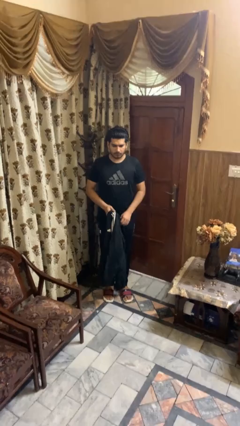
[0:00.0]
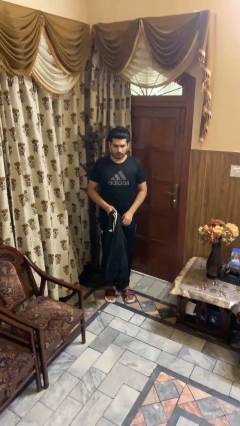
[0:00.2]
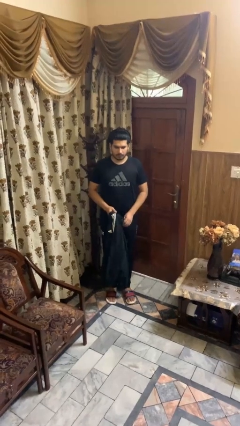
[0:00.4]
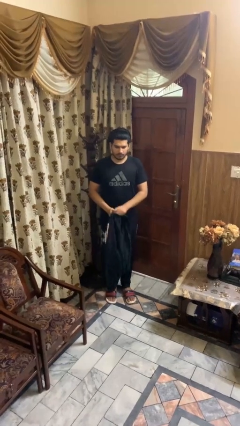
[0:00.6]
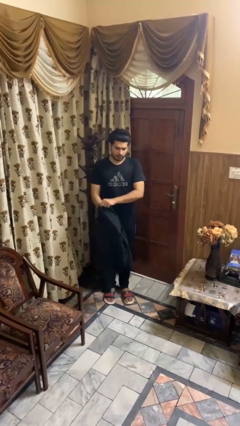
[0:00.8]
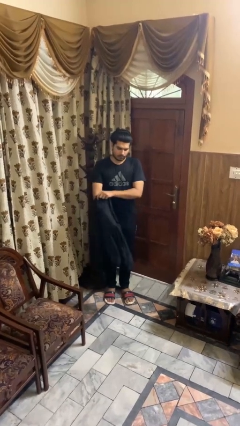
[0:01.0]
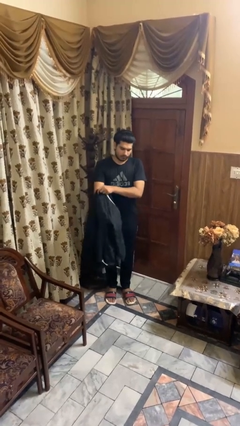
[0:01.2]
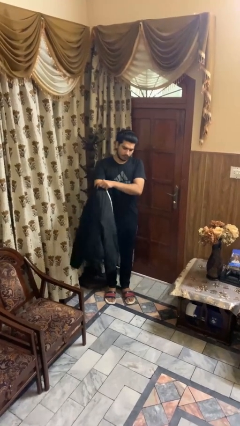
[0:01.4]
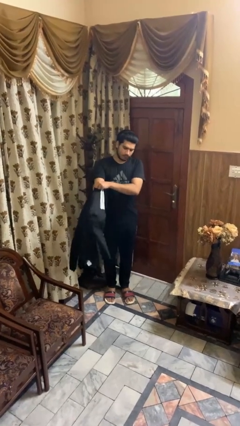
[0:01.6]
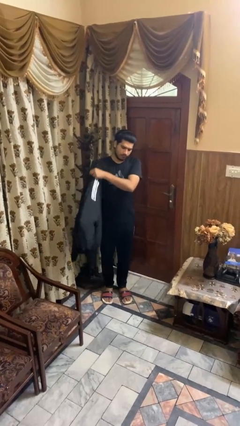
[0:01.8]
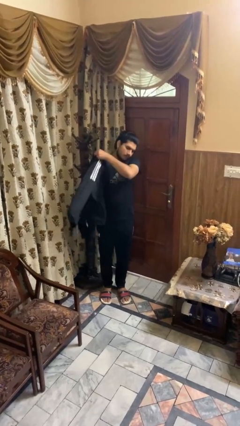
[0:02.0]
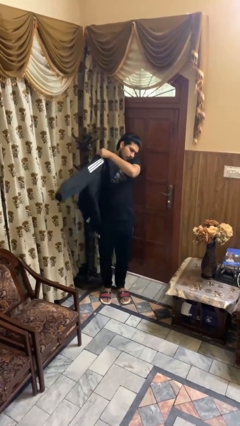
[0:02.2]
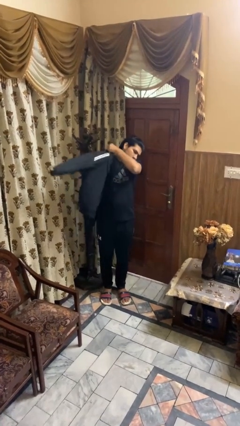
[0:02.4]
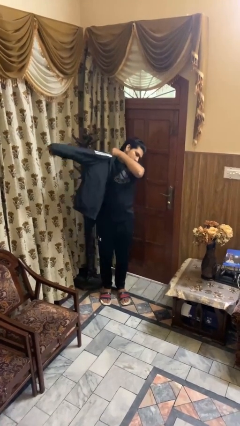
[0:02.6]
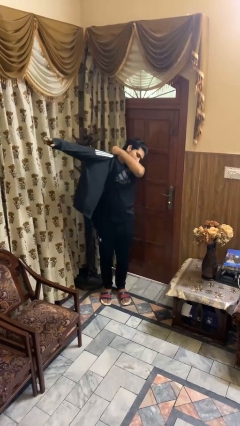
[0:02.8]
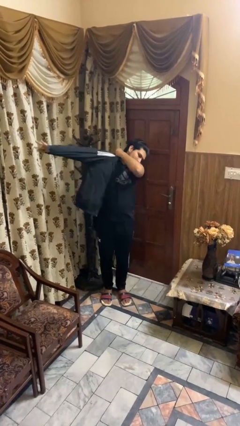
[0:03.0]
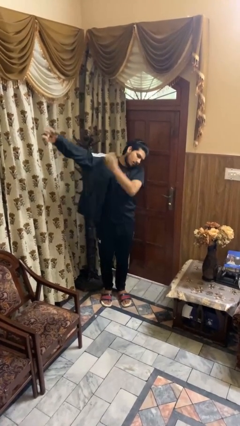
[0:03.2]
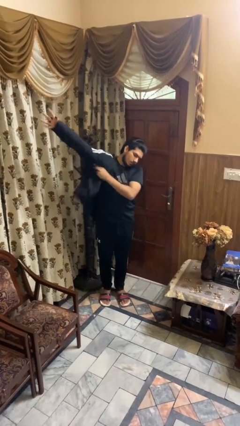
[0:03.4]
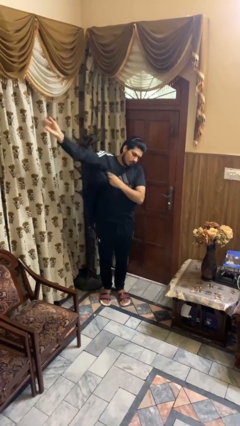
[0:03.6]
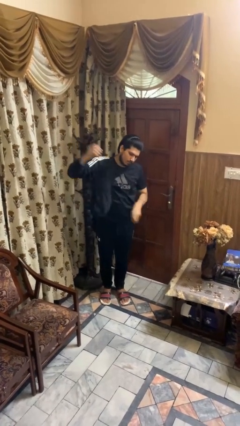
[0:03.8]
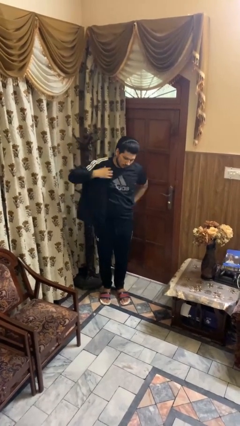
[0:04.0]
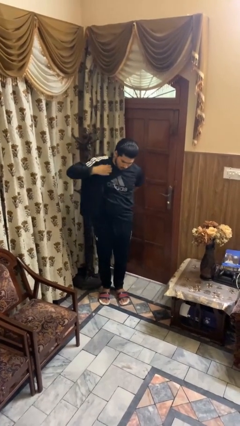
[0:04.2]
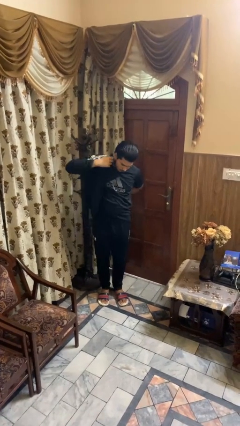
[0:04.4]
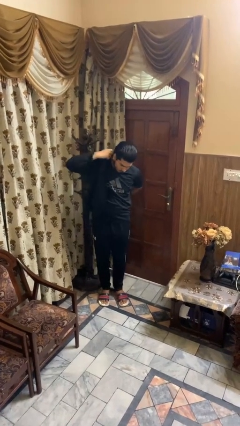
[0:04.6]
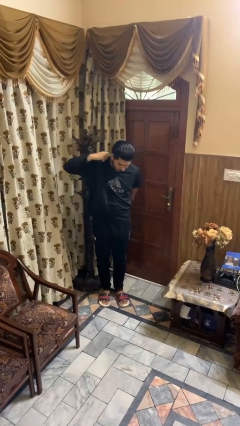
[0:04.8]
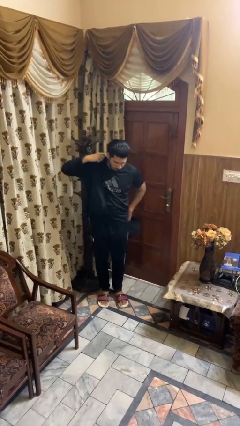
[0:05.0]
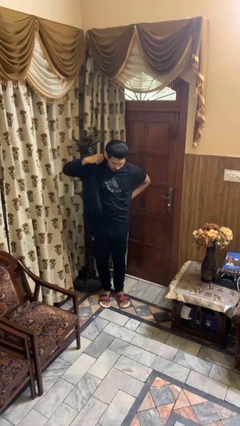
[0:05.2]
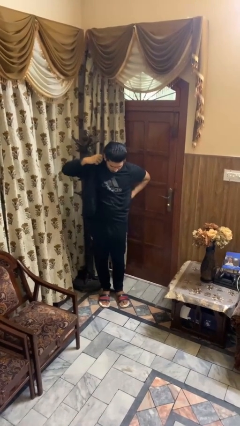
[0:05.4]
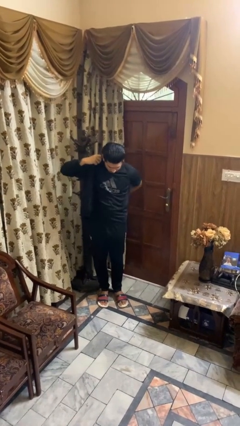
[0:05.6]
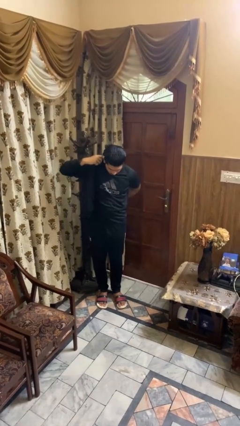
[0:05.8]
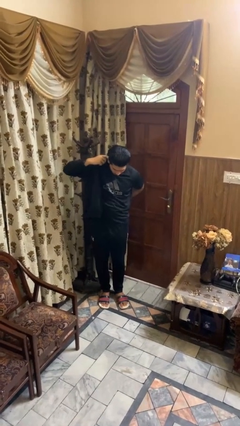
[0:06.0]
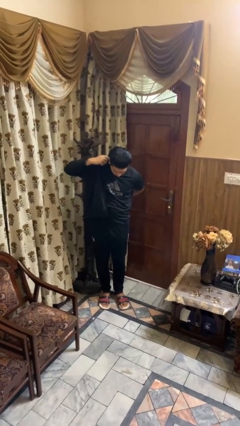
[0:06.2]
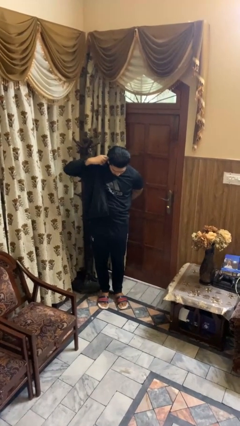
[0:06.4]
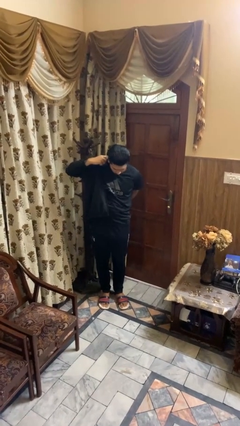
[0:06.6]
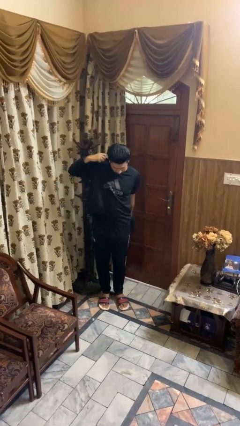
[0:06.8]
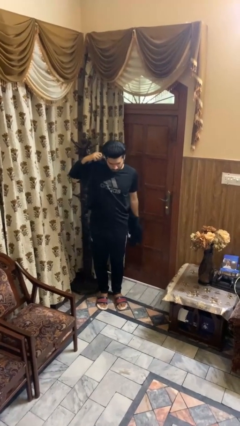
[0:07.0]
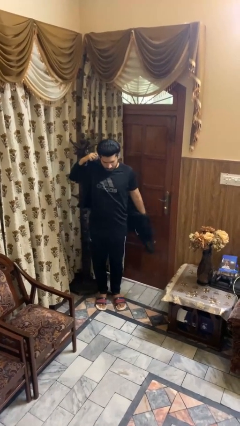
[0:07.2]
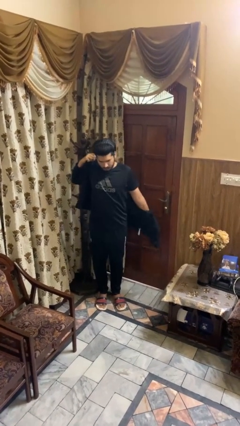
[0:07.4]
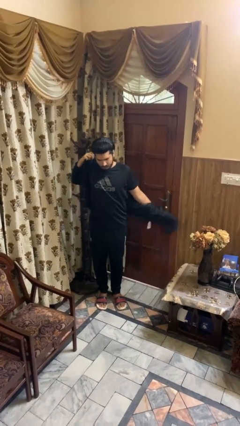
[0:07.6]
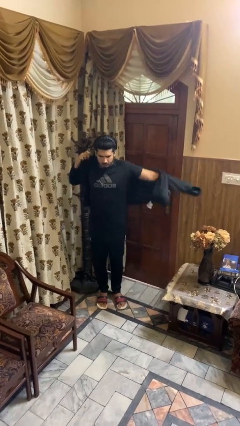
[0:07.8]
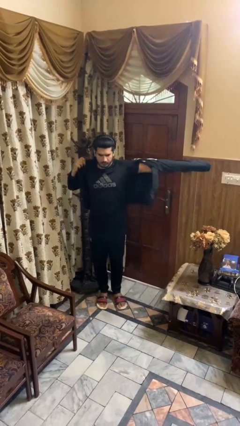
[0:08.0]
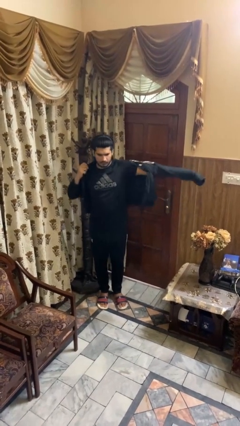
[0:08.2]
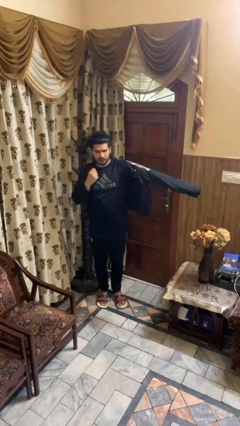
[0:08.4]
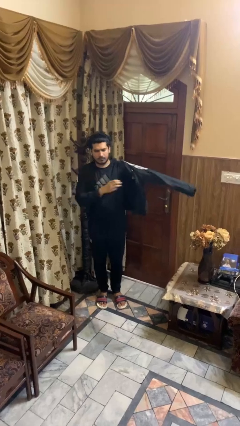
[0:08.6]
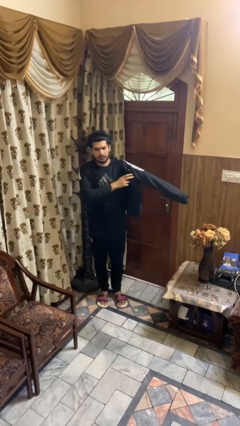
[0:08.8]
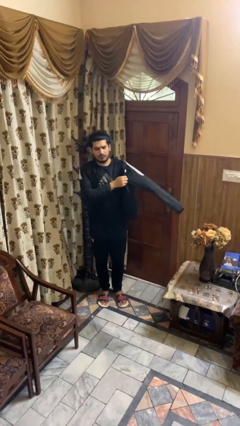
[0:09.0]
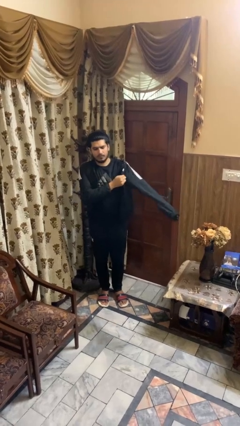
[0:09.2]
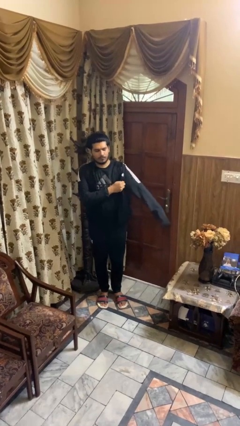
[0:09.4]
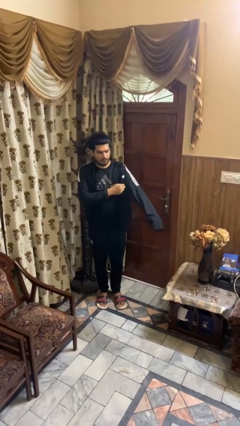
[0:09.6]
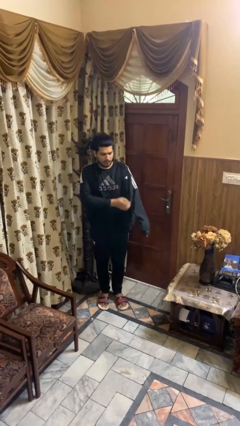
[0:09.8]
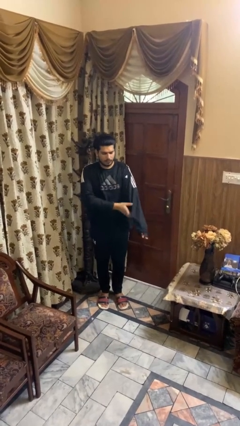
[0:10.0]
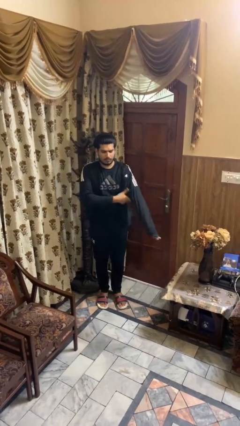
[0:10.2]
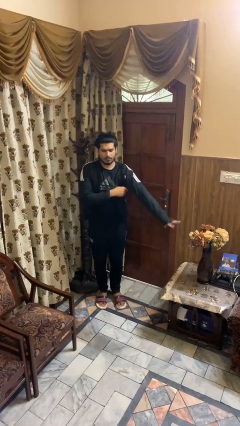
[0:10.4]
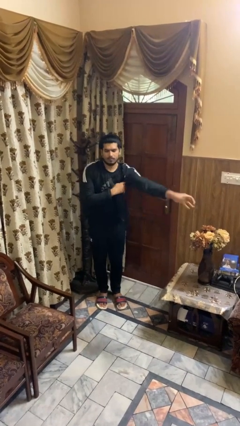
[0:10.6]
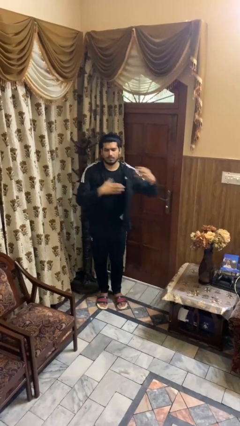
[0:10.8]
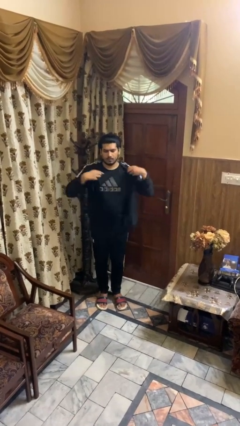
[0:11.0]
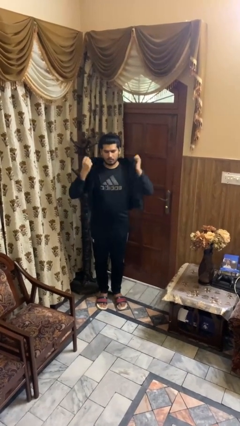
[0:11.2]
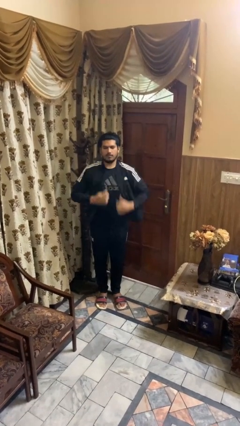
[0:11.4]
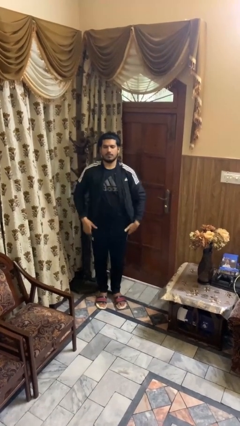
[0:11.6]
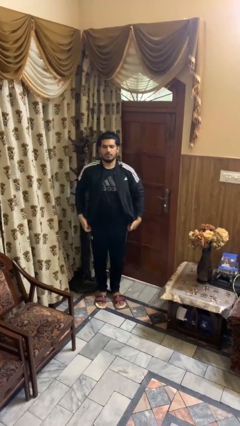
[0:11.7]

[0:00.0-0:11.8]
person puts on jacket

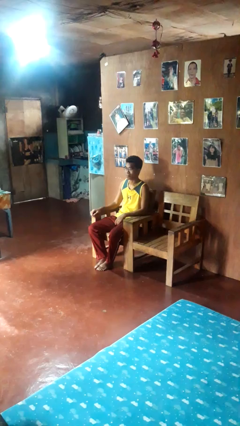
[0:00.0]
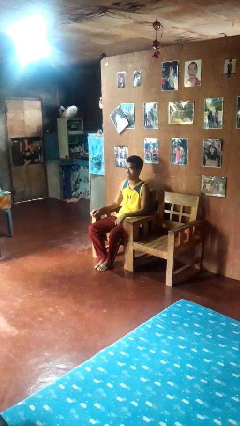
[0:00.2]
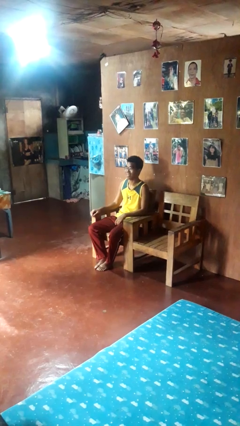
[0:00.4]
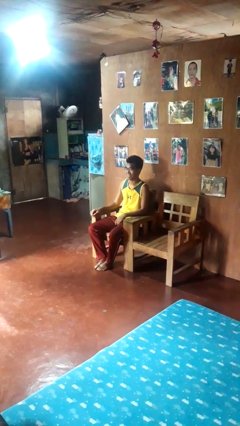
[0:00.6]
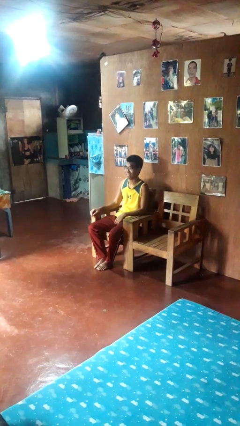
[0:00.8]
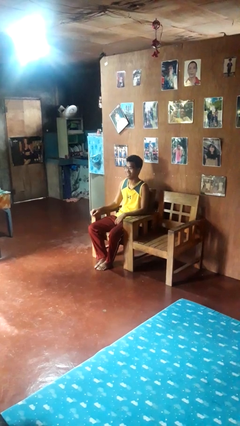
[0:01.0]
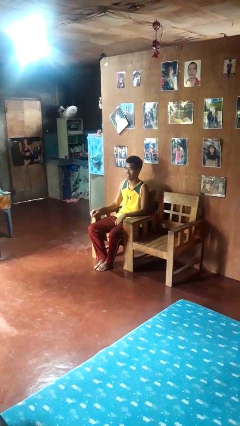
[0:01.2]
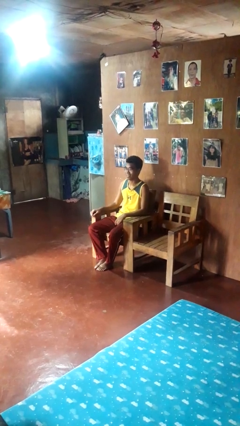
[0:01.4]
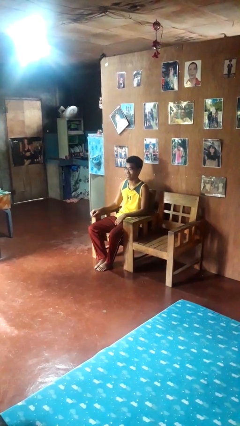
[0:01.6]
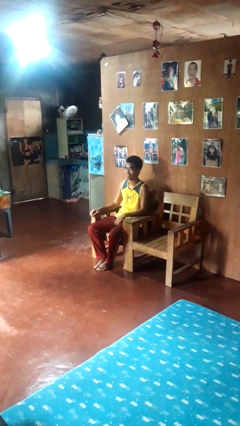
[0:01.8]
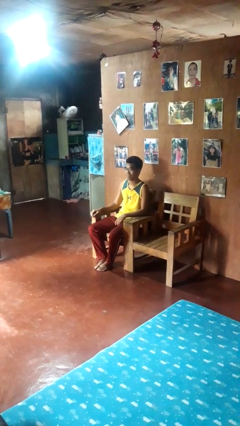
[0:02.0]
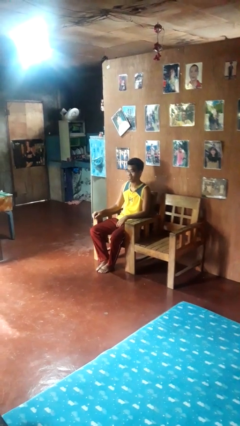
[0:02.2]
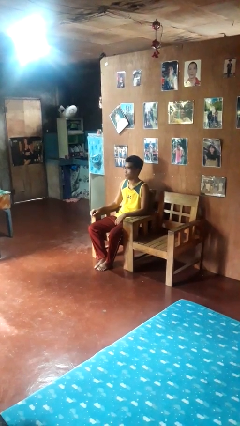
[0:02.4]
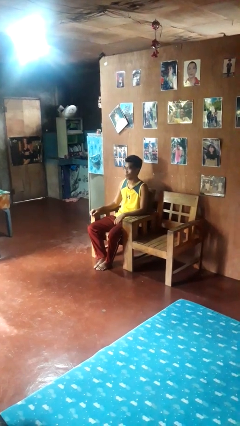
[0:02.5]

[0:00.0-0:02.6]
person nods head

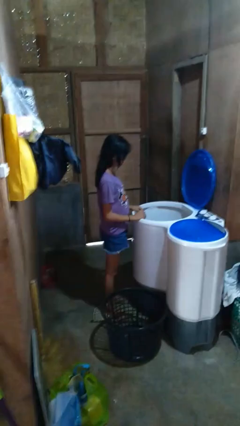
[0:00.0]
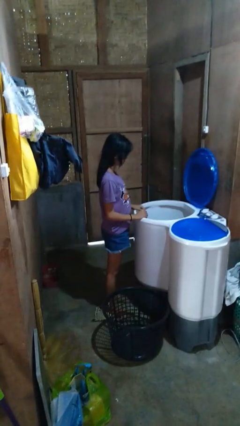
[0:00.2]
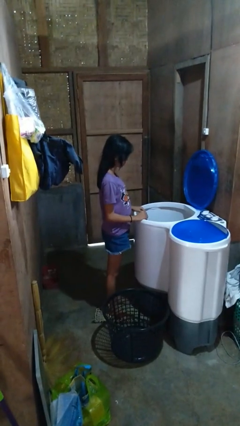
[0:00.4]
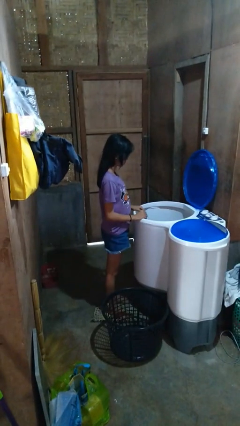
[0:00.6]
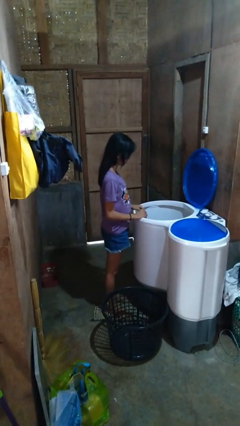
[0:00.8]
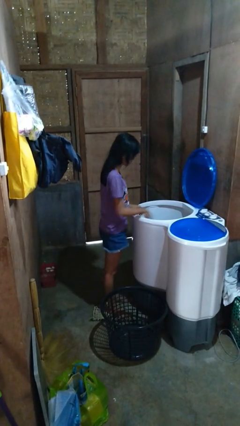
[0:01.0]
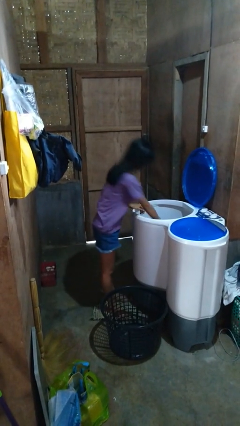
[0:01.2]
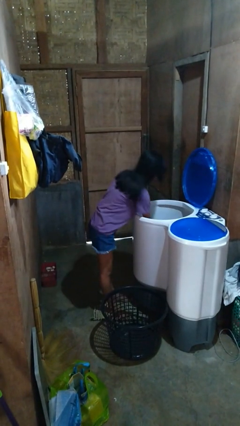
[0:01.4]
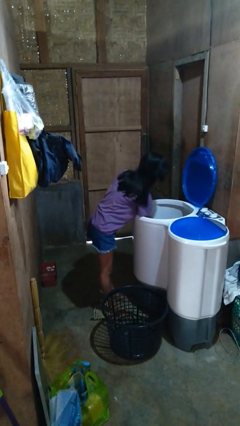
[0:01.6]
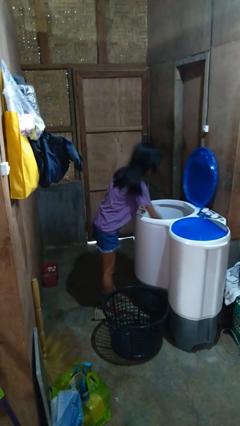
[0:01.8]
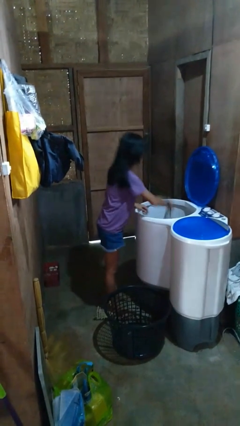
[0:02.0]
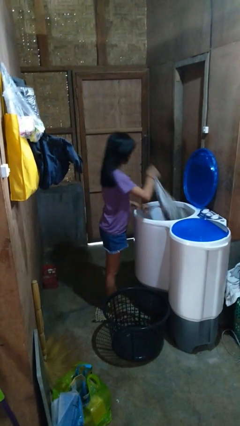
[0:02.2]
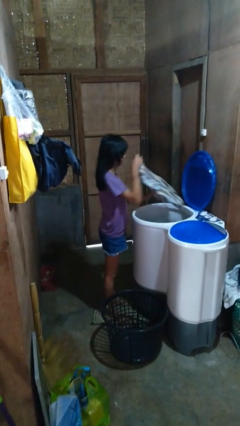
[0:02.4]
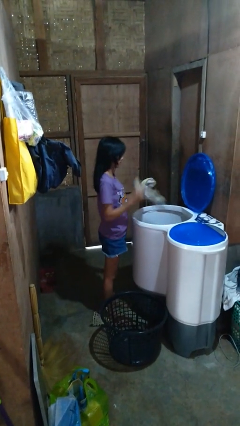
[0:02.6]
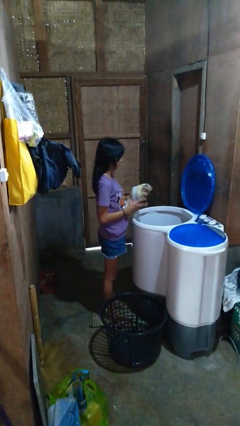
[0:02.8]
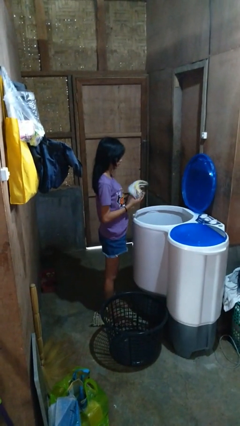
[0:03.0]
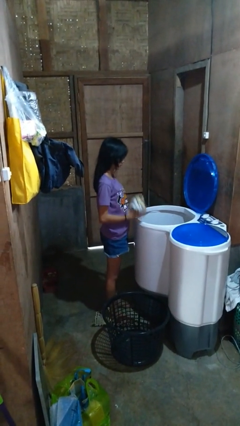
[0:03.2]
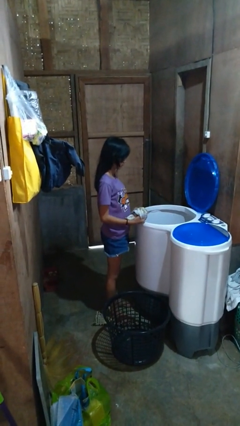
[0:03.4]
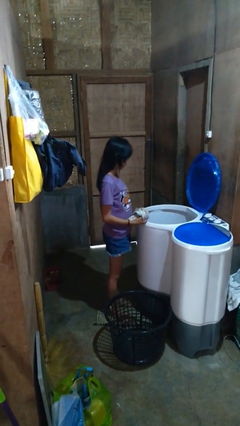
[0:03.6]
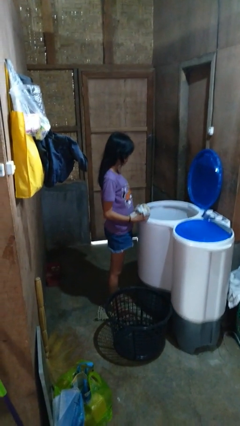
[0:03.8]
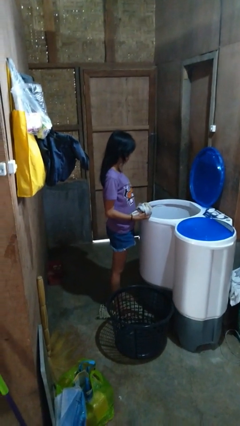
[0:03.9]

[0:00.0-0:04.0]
person loads clotheswasher
